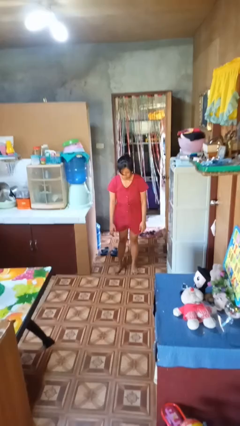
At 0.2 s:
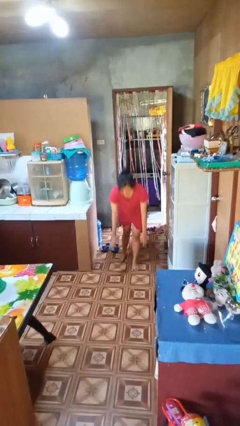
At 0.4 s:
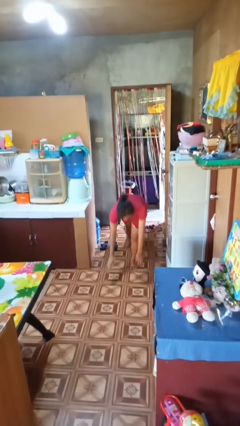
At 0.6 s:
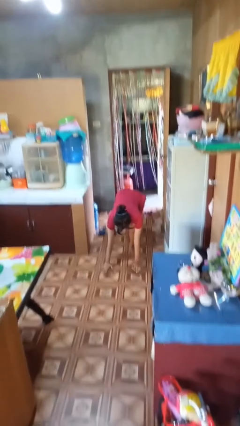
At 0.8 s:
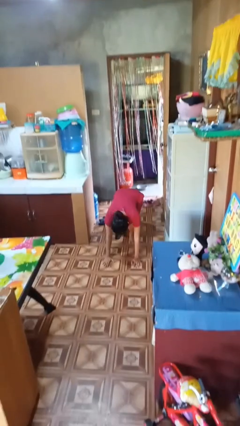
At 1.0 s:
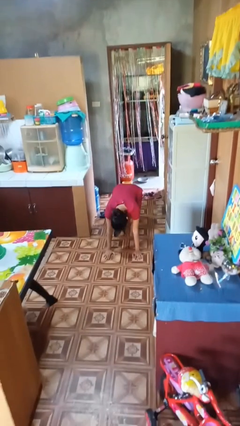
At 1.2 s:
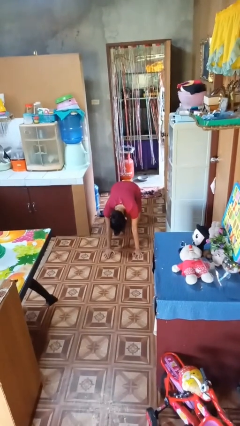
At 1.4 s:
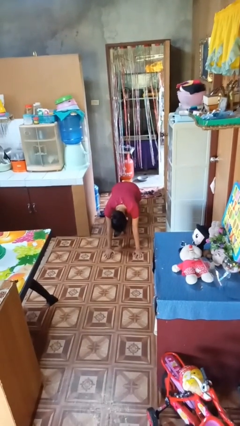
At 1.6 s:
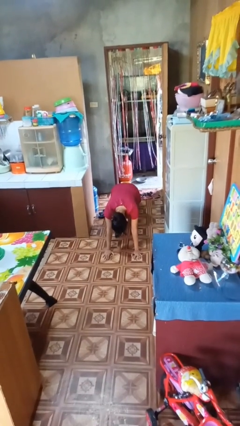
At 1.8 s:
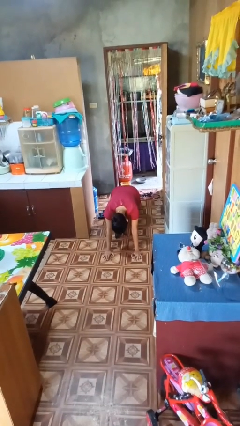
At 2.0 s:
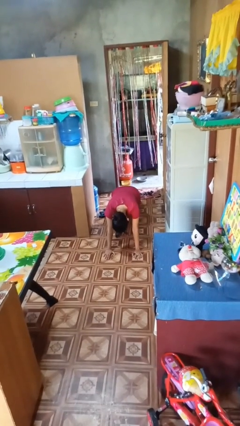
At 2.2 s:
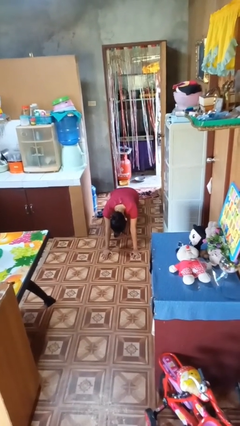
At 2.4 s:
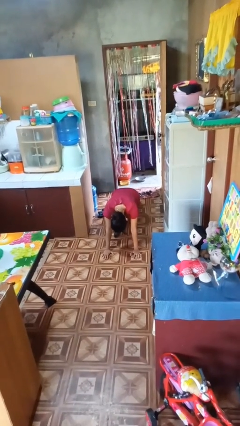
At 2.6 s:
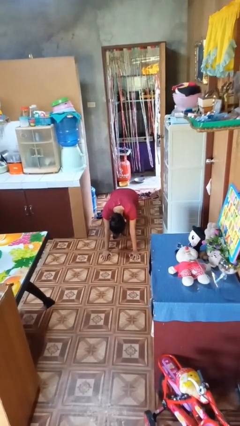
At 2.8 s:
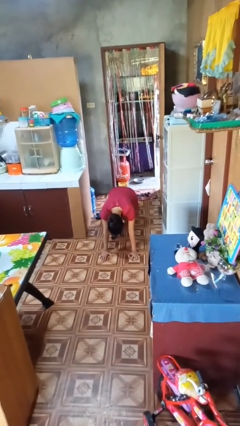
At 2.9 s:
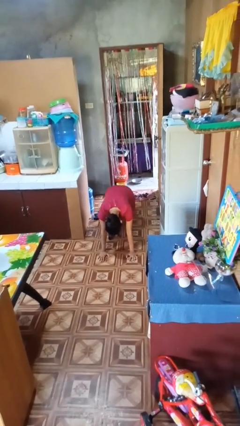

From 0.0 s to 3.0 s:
person exercises with plank

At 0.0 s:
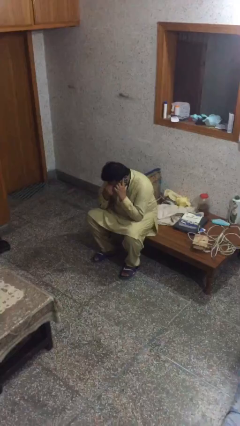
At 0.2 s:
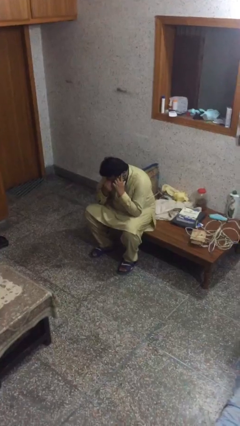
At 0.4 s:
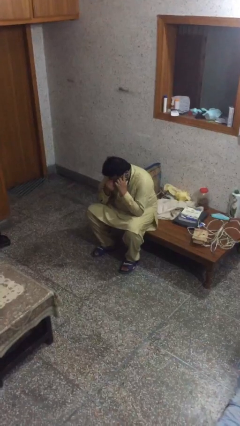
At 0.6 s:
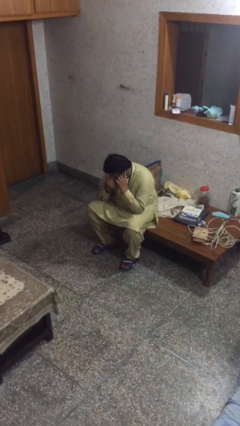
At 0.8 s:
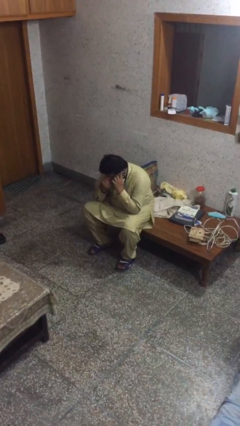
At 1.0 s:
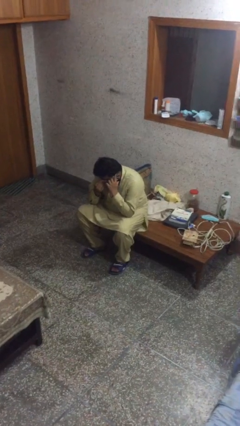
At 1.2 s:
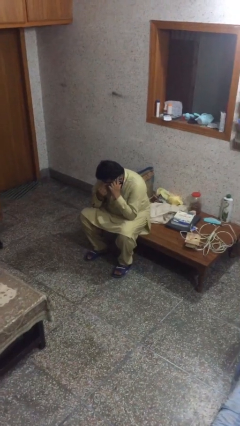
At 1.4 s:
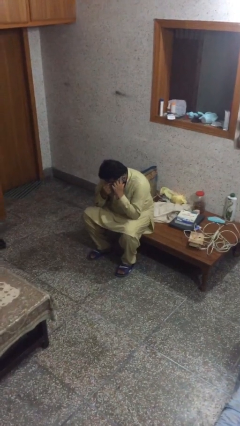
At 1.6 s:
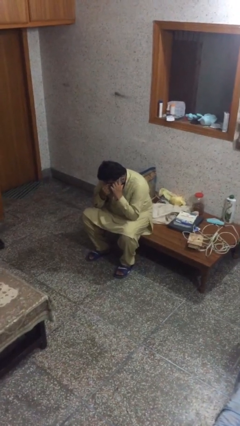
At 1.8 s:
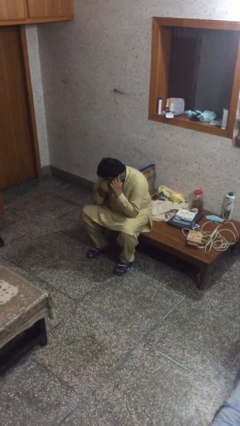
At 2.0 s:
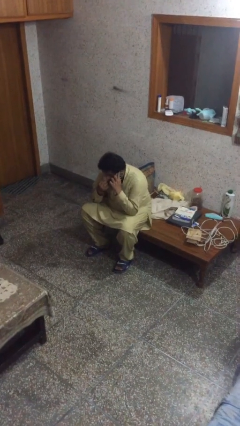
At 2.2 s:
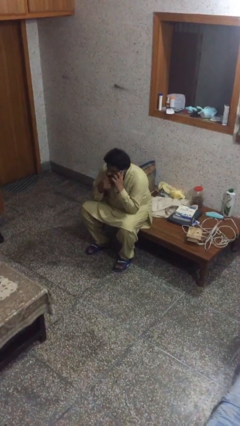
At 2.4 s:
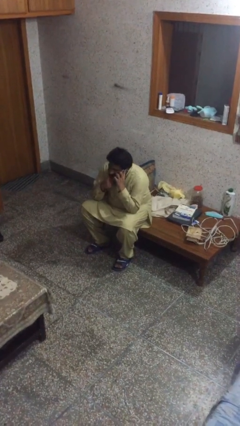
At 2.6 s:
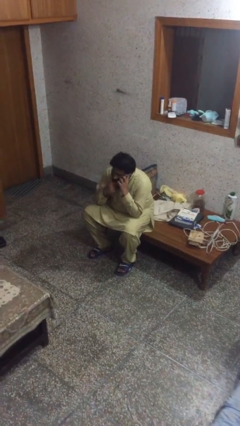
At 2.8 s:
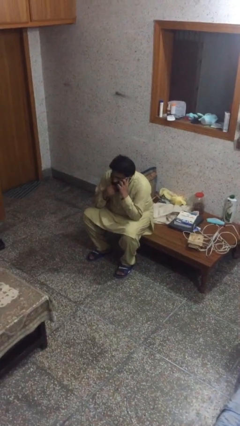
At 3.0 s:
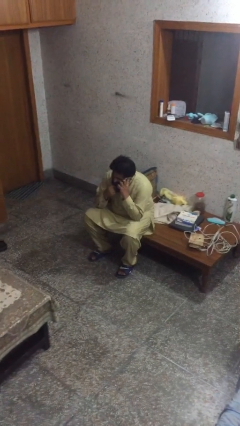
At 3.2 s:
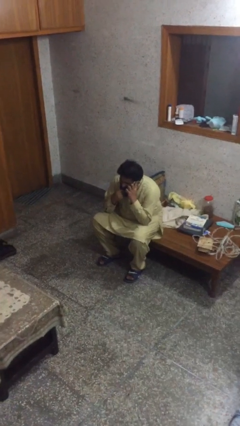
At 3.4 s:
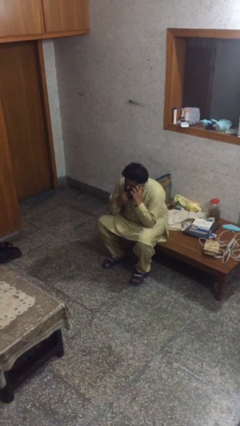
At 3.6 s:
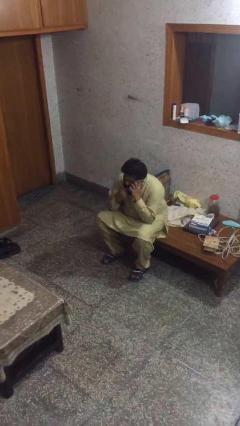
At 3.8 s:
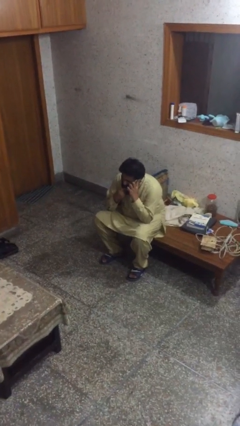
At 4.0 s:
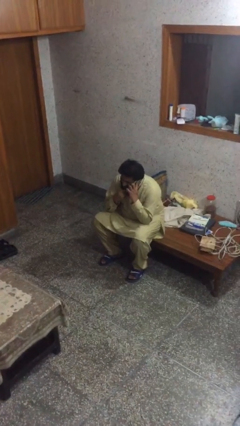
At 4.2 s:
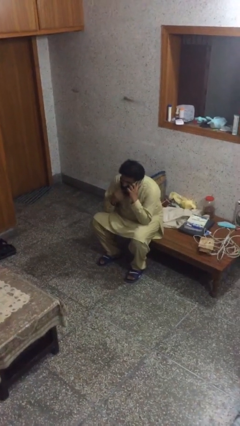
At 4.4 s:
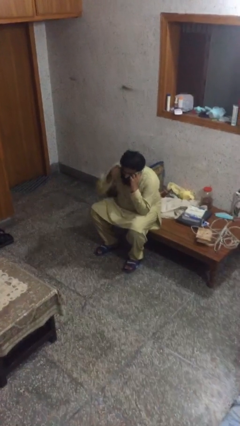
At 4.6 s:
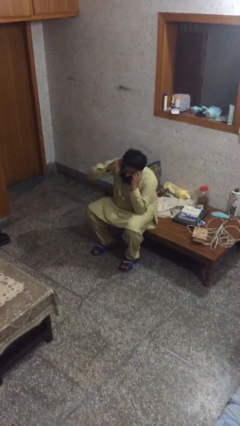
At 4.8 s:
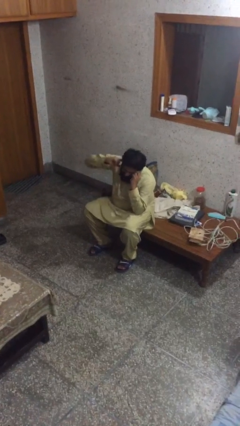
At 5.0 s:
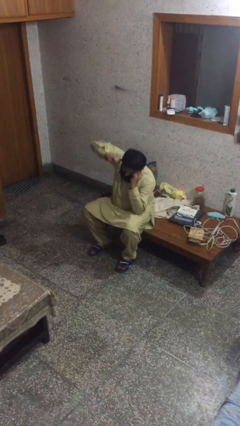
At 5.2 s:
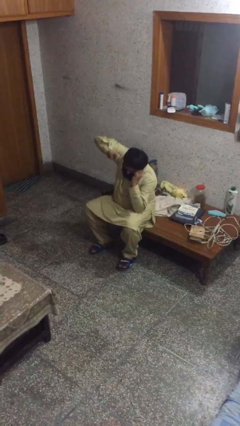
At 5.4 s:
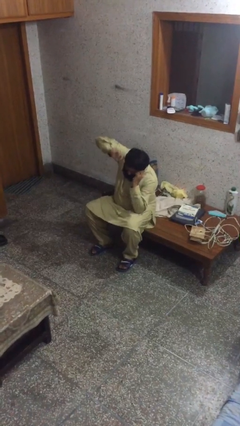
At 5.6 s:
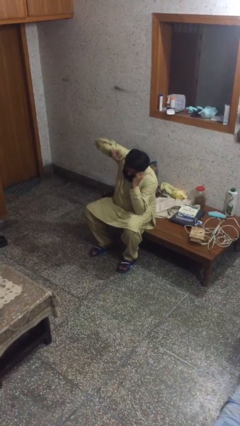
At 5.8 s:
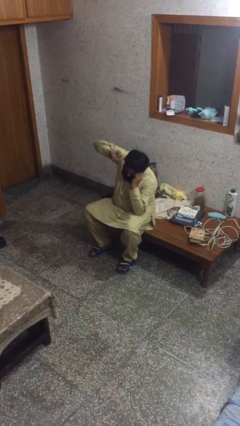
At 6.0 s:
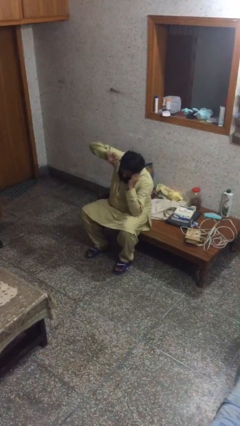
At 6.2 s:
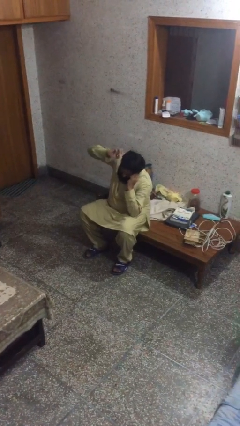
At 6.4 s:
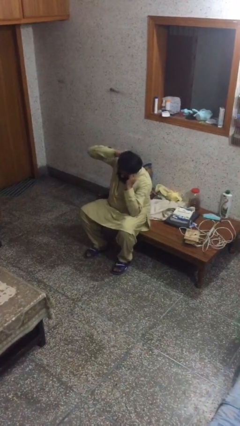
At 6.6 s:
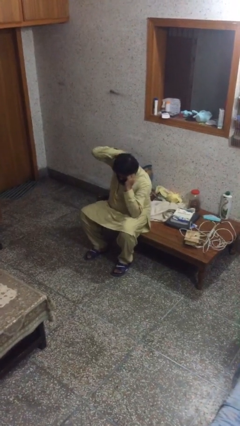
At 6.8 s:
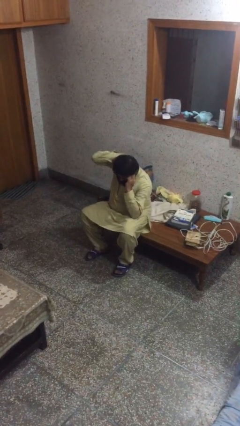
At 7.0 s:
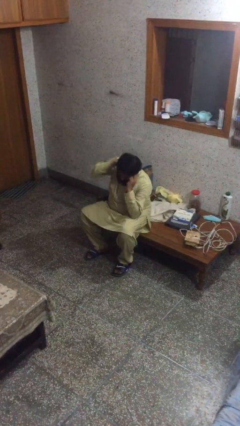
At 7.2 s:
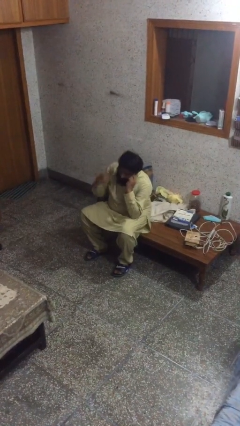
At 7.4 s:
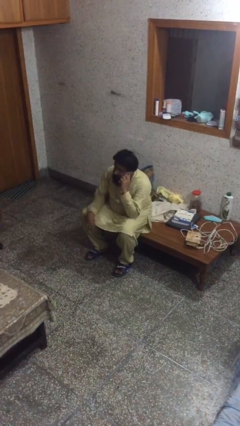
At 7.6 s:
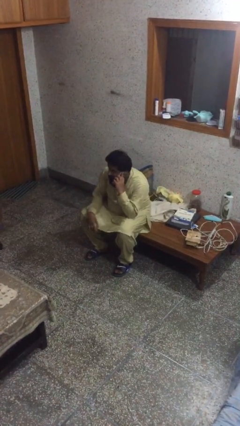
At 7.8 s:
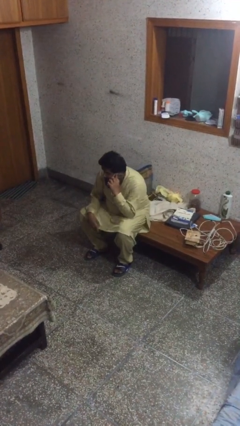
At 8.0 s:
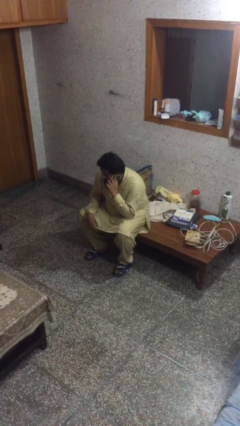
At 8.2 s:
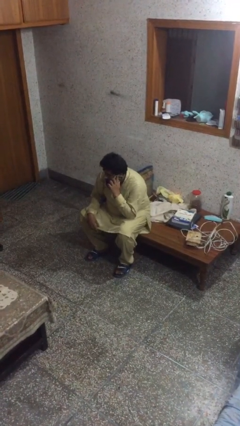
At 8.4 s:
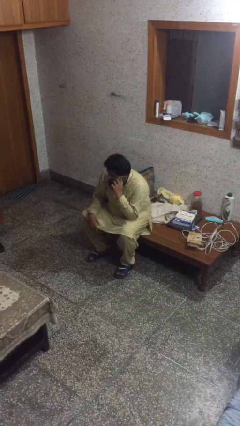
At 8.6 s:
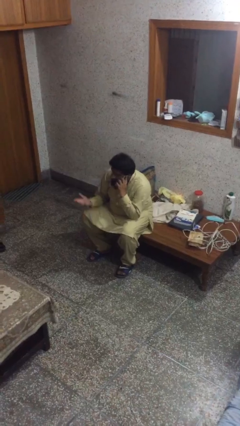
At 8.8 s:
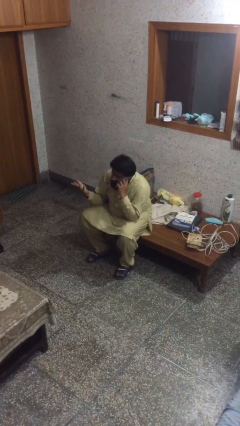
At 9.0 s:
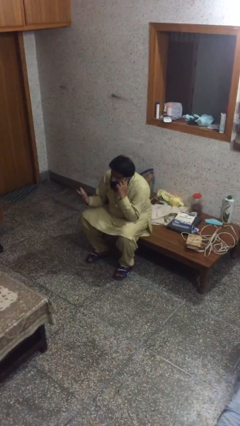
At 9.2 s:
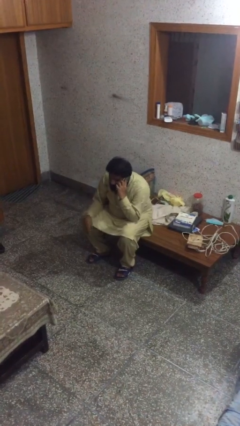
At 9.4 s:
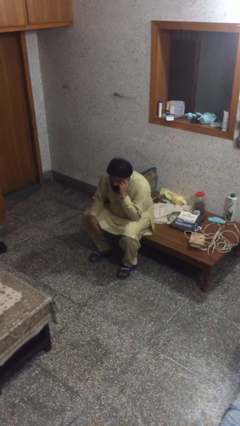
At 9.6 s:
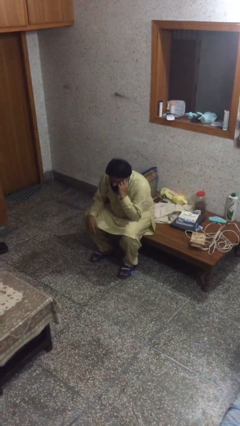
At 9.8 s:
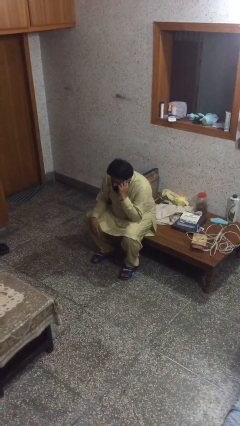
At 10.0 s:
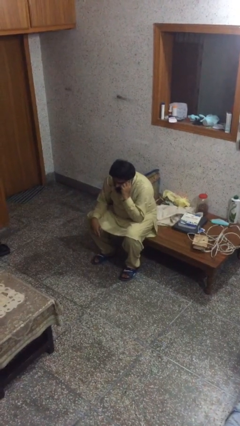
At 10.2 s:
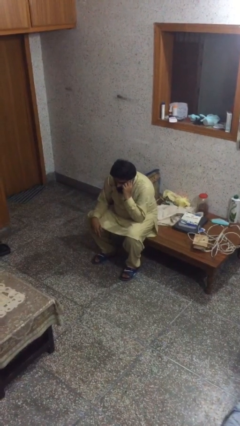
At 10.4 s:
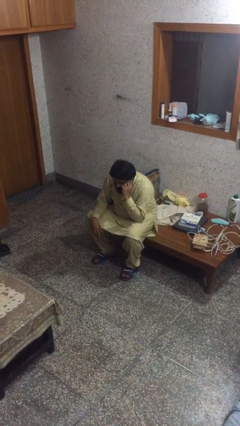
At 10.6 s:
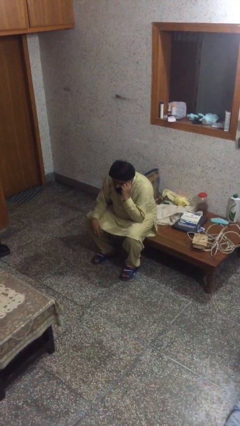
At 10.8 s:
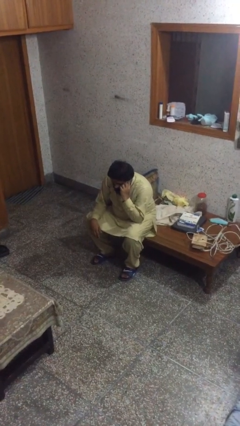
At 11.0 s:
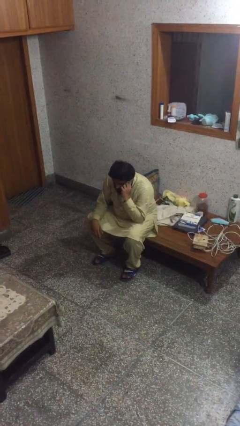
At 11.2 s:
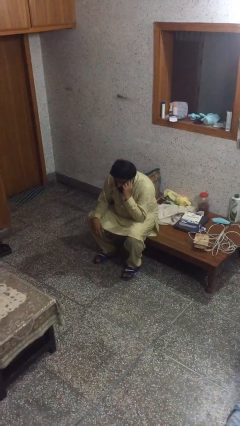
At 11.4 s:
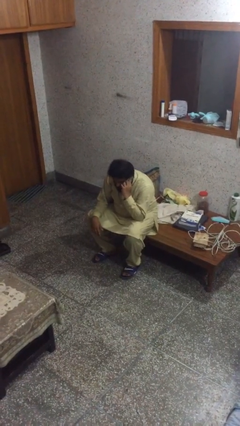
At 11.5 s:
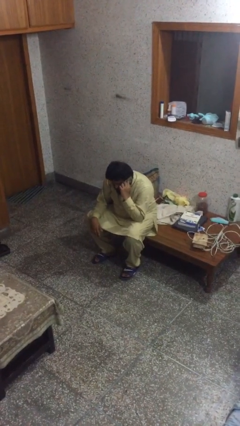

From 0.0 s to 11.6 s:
person talks on phone

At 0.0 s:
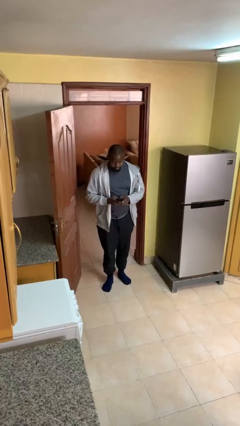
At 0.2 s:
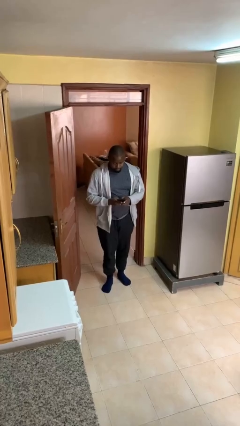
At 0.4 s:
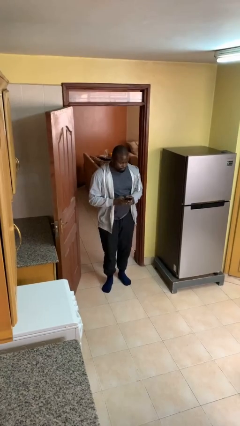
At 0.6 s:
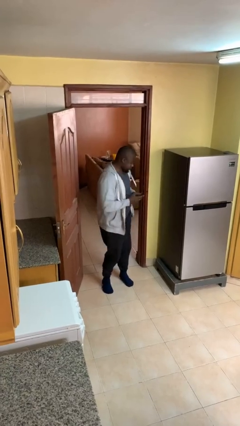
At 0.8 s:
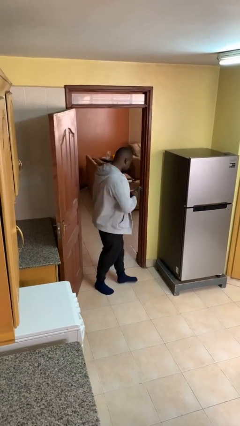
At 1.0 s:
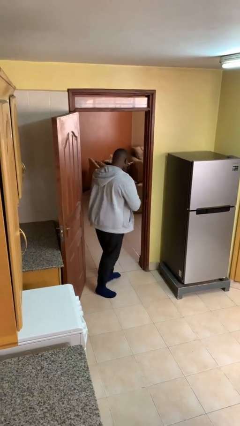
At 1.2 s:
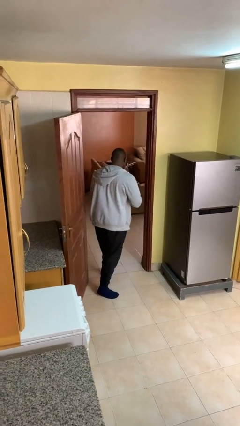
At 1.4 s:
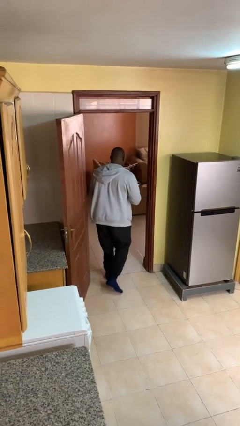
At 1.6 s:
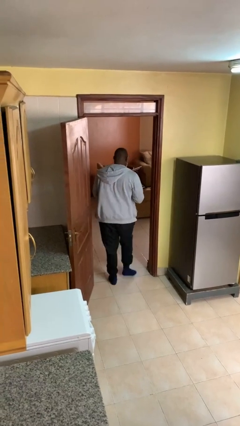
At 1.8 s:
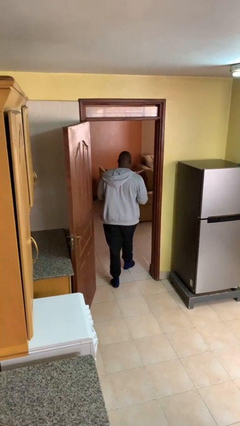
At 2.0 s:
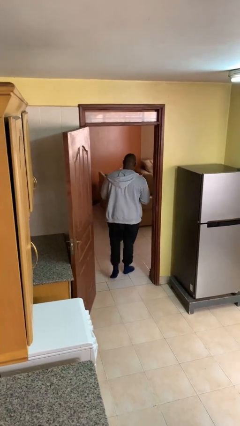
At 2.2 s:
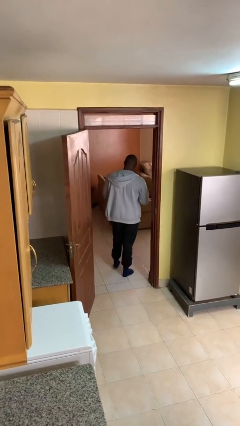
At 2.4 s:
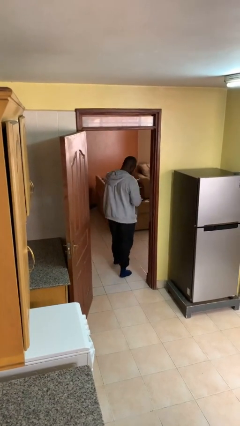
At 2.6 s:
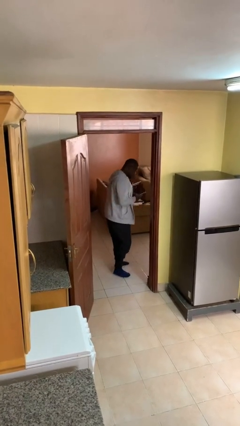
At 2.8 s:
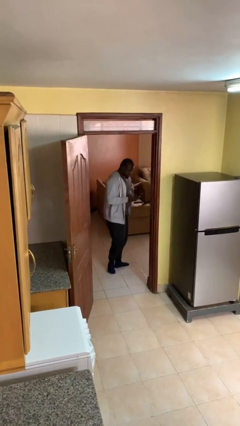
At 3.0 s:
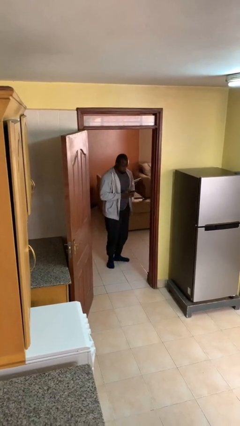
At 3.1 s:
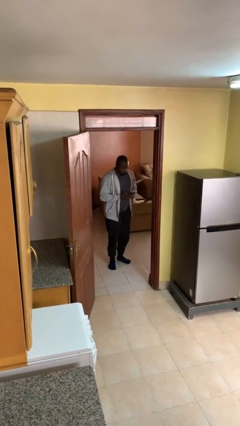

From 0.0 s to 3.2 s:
person exits scene through structure
